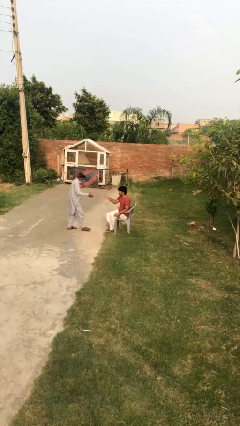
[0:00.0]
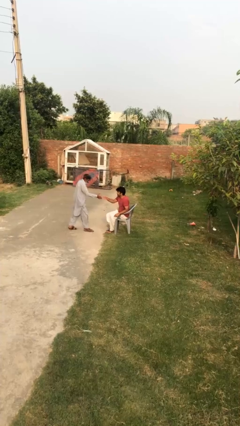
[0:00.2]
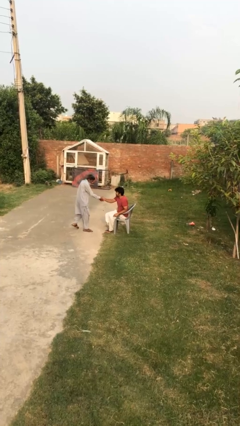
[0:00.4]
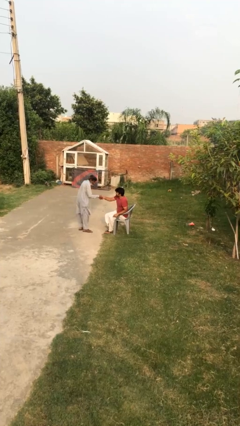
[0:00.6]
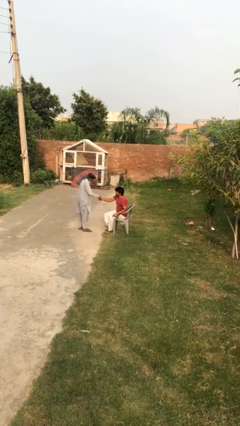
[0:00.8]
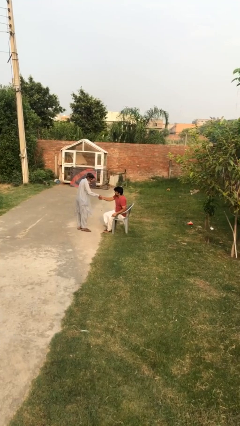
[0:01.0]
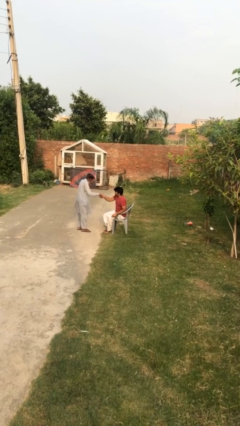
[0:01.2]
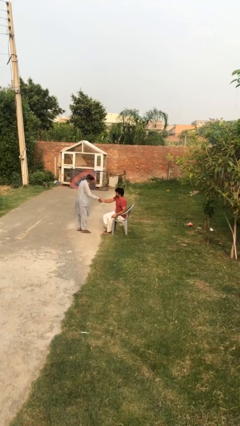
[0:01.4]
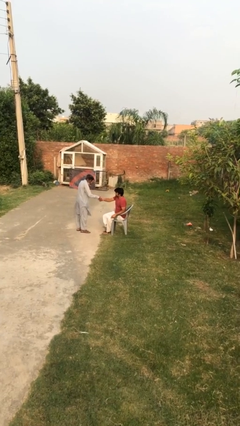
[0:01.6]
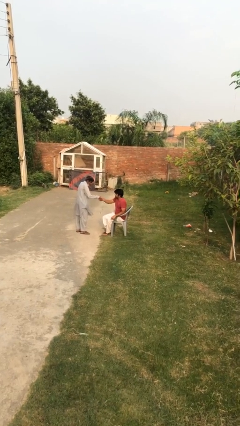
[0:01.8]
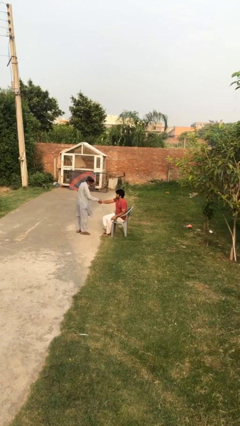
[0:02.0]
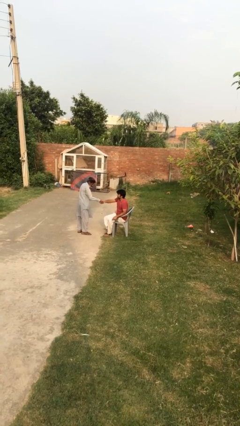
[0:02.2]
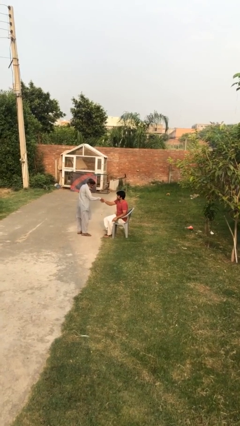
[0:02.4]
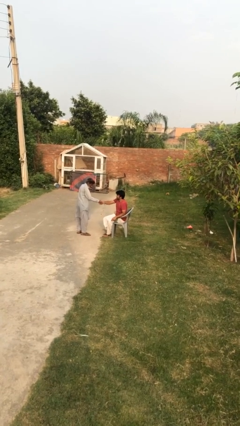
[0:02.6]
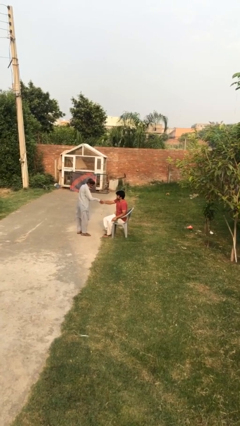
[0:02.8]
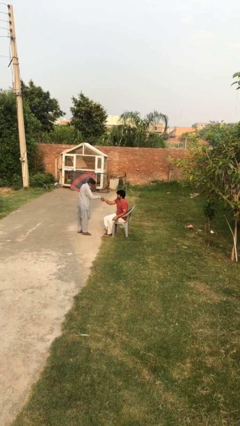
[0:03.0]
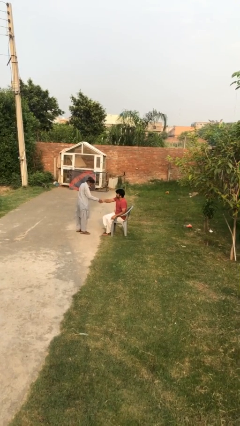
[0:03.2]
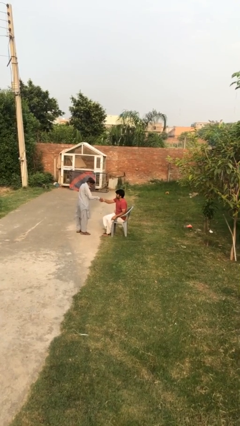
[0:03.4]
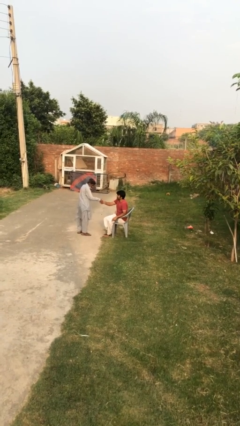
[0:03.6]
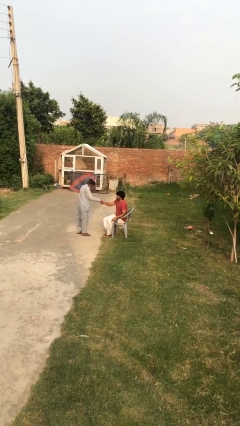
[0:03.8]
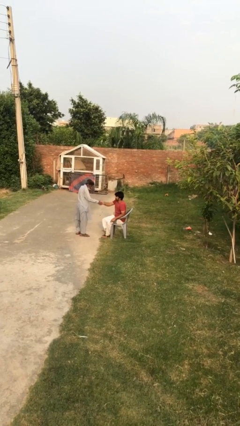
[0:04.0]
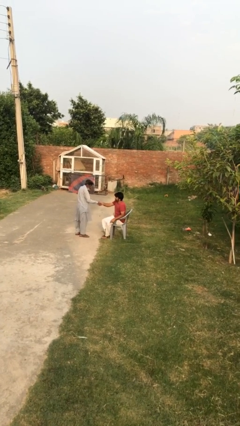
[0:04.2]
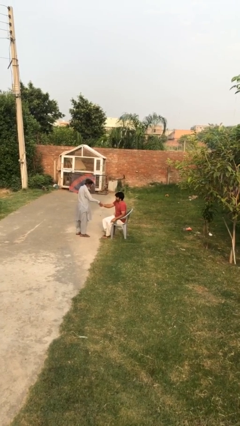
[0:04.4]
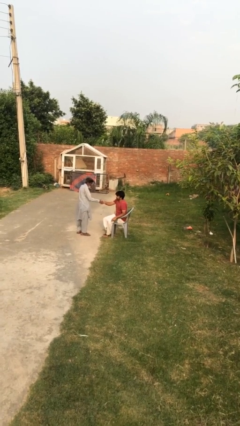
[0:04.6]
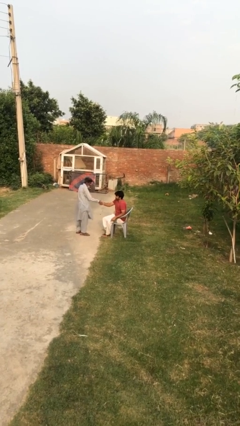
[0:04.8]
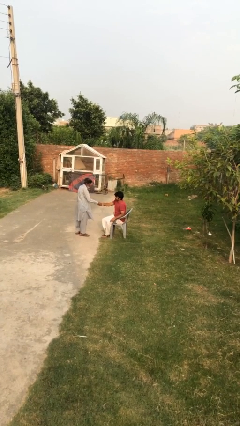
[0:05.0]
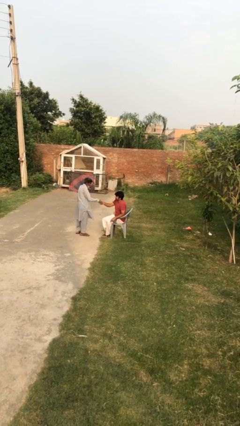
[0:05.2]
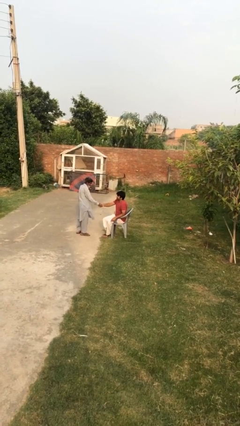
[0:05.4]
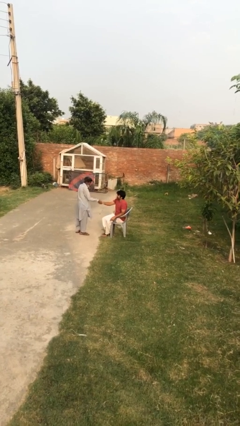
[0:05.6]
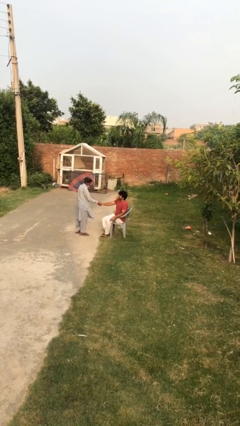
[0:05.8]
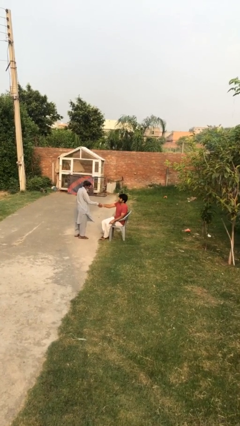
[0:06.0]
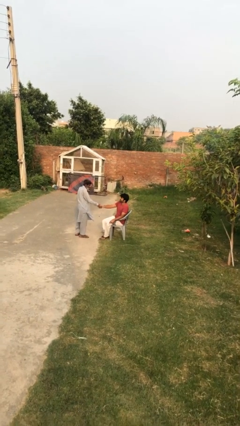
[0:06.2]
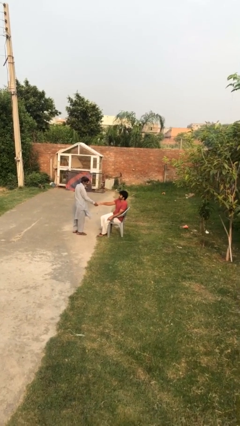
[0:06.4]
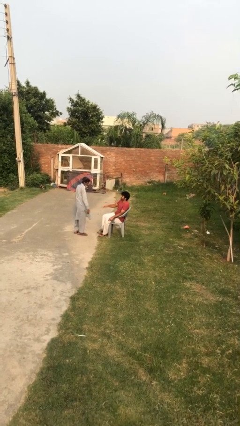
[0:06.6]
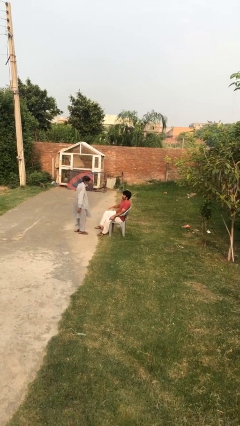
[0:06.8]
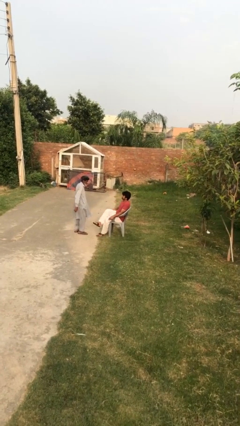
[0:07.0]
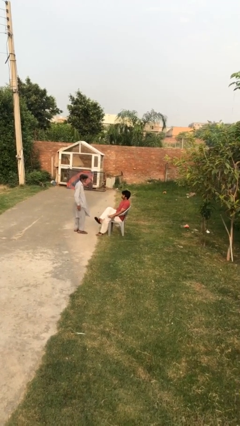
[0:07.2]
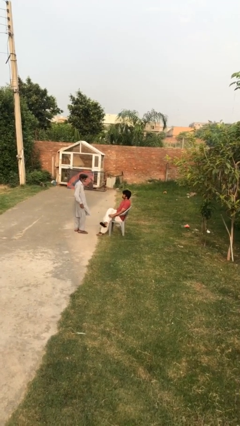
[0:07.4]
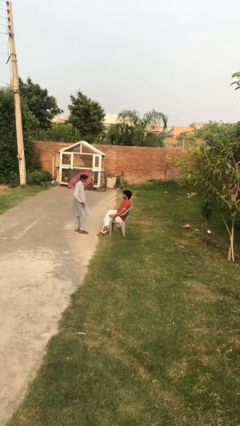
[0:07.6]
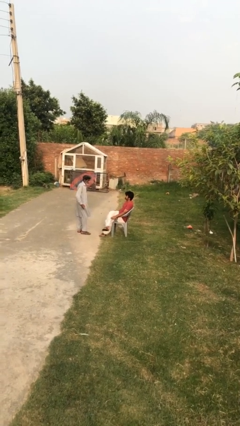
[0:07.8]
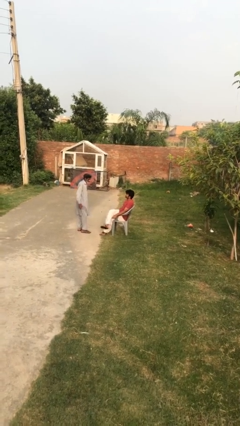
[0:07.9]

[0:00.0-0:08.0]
person shakes hand

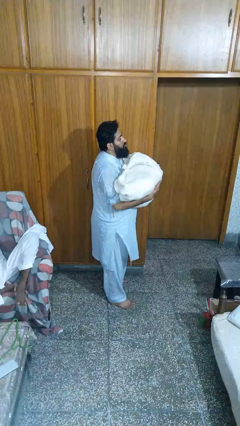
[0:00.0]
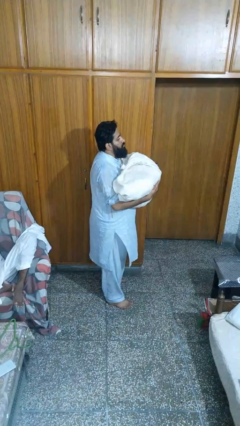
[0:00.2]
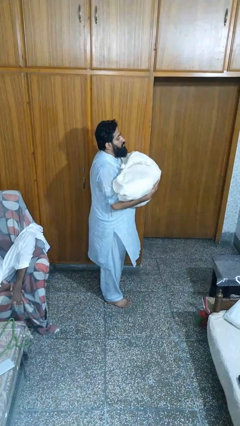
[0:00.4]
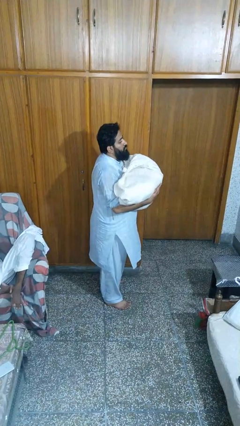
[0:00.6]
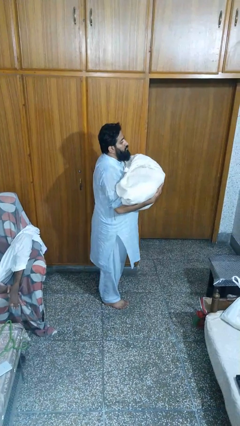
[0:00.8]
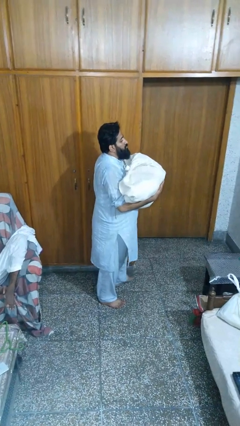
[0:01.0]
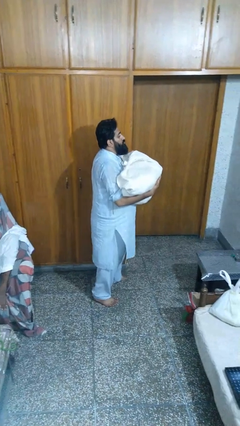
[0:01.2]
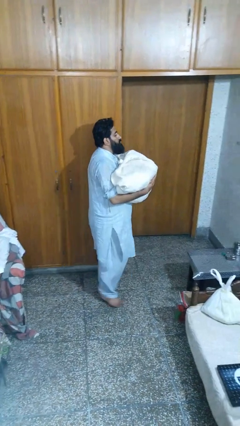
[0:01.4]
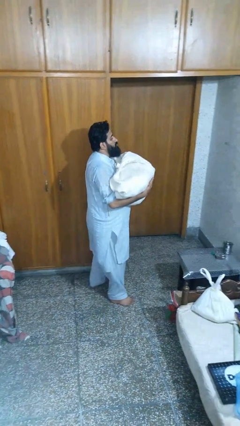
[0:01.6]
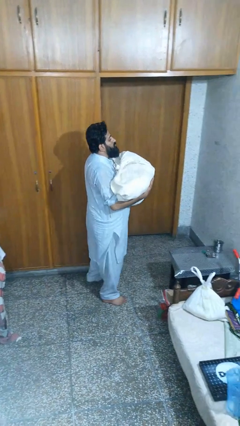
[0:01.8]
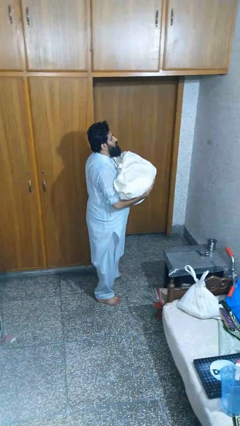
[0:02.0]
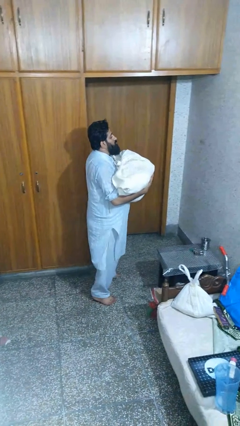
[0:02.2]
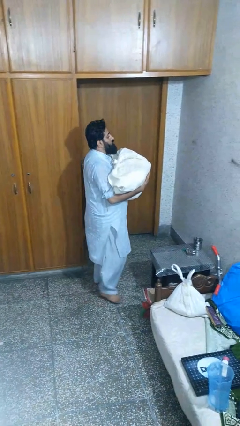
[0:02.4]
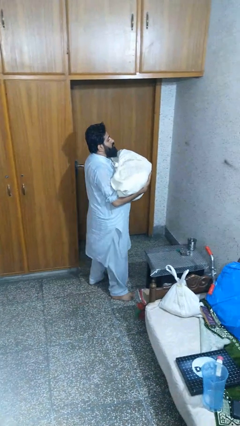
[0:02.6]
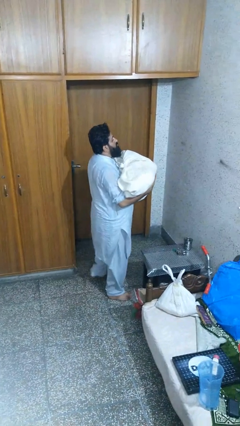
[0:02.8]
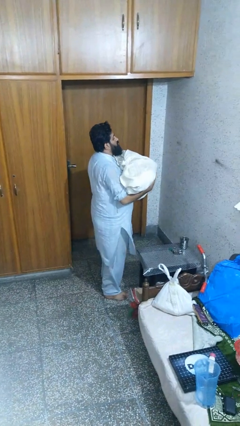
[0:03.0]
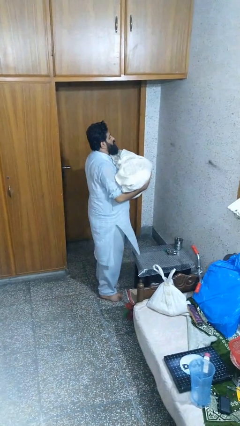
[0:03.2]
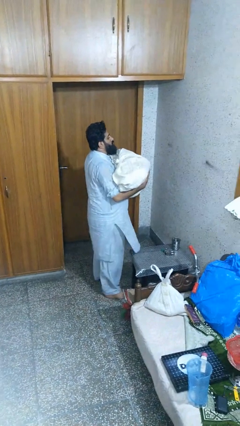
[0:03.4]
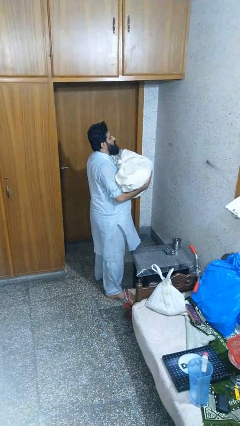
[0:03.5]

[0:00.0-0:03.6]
person carries laundry basket

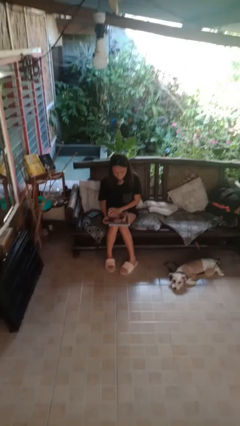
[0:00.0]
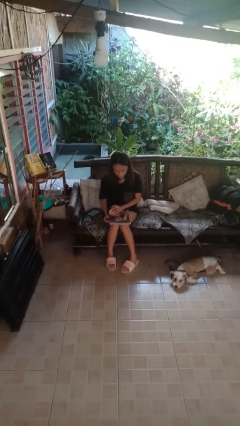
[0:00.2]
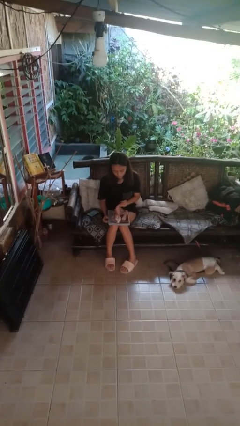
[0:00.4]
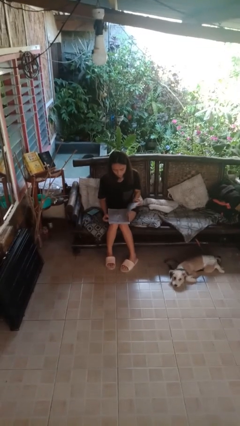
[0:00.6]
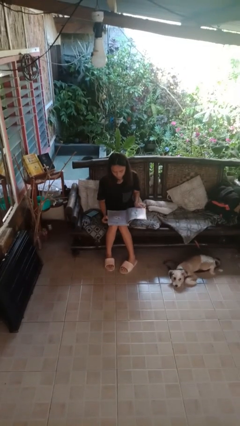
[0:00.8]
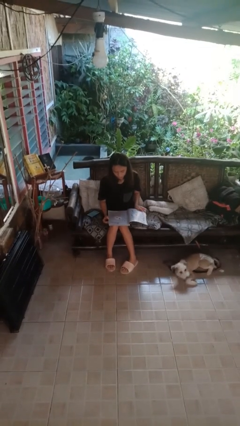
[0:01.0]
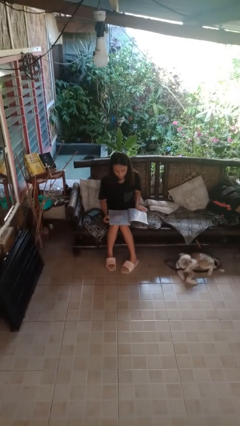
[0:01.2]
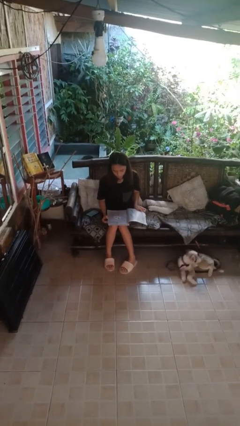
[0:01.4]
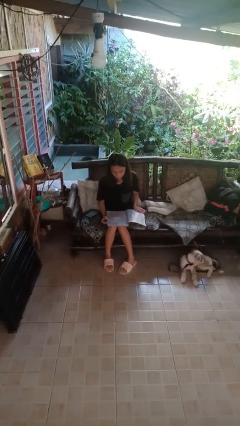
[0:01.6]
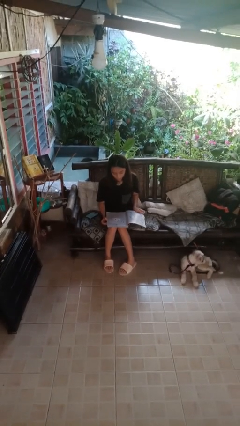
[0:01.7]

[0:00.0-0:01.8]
person reads magazine

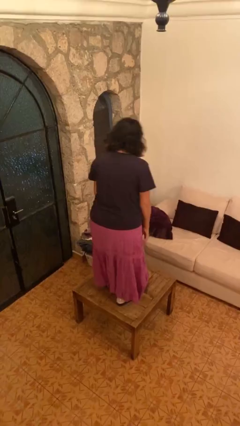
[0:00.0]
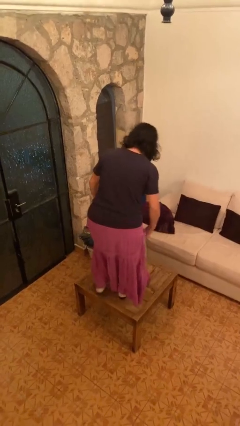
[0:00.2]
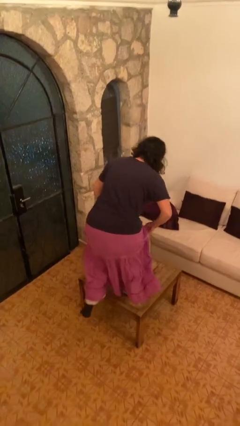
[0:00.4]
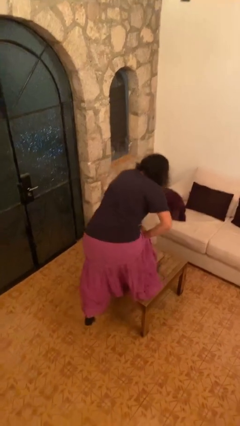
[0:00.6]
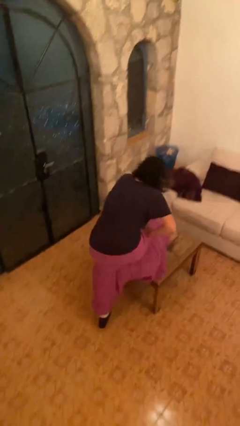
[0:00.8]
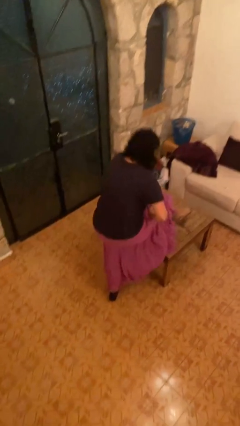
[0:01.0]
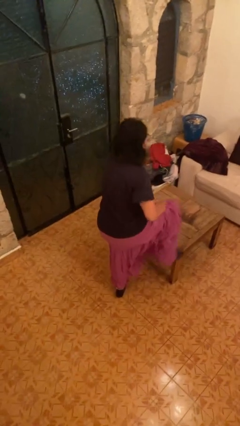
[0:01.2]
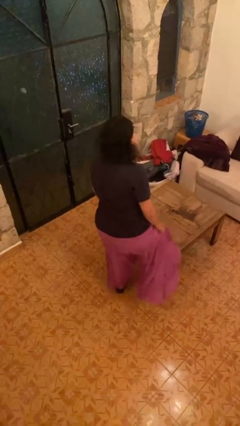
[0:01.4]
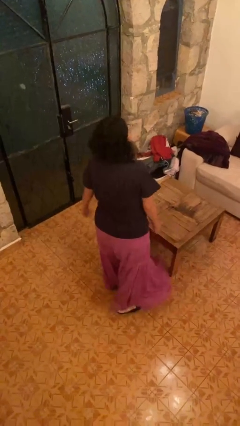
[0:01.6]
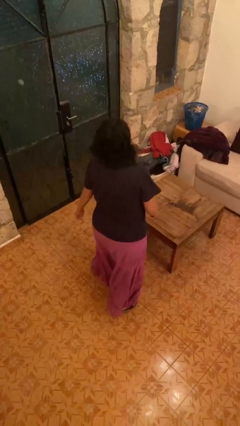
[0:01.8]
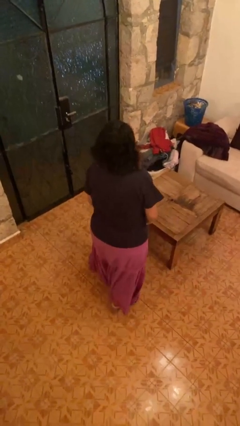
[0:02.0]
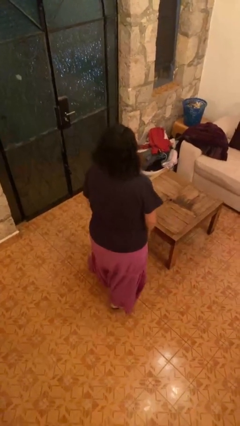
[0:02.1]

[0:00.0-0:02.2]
person climbs off table

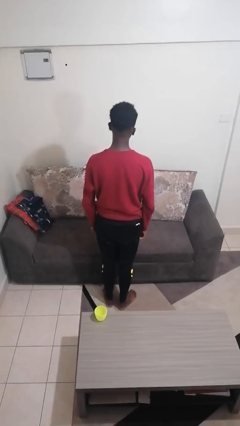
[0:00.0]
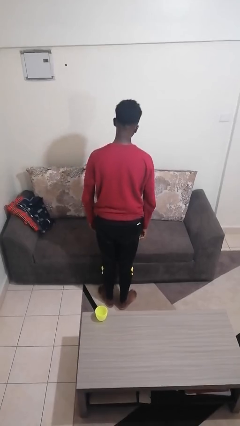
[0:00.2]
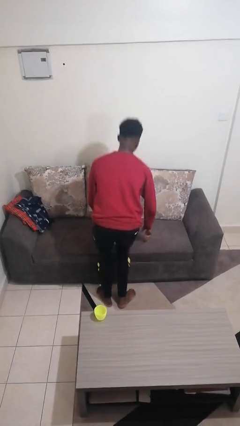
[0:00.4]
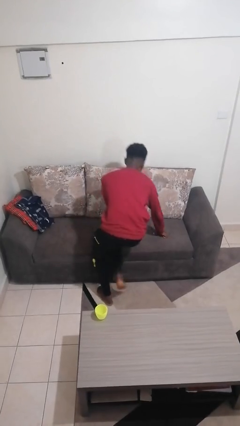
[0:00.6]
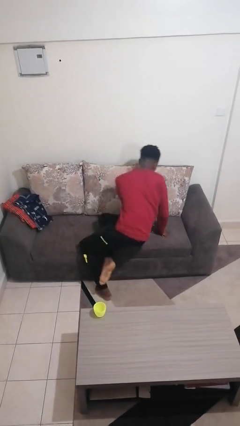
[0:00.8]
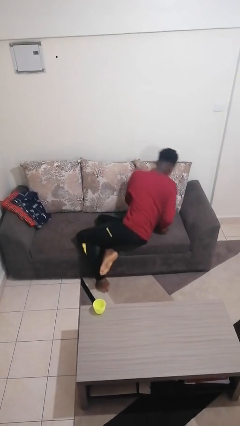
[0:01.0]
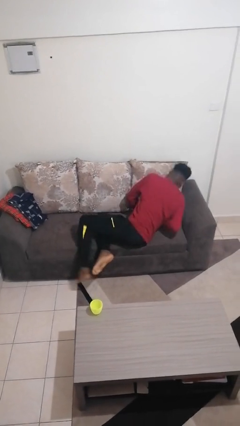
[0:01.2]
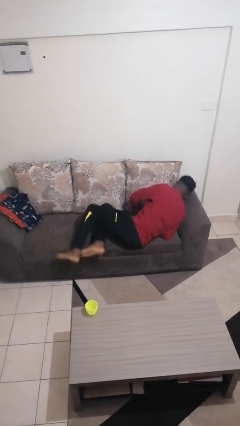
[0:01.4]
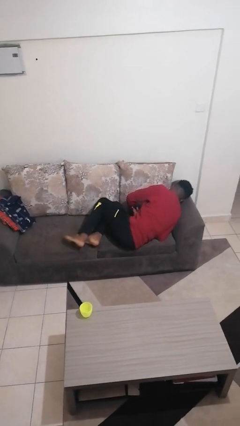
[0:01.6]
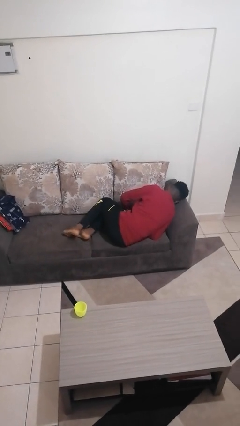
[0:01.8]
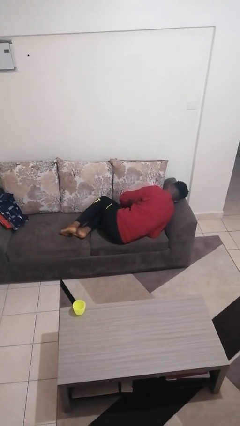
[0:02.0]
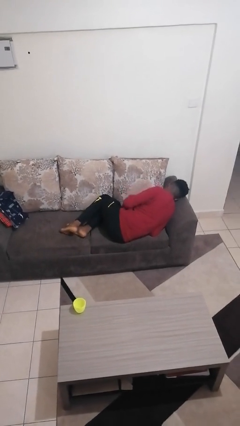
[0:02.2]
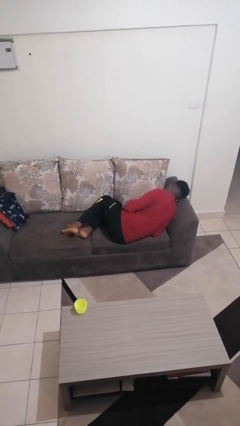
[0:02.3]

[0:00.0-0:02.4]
person lies down on couch
